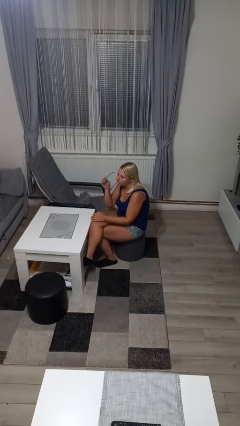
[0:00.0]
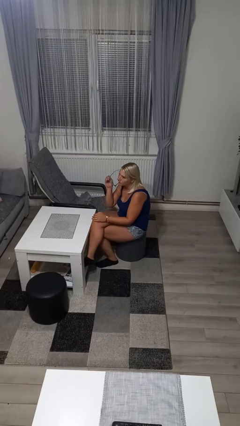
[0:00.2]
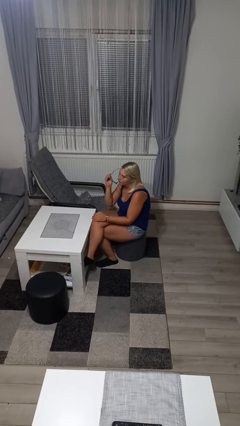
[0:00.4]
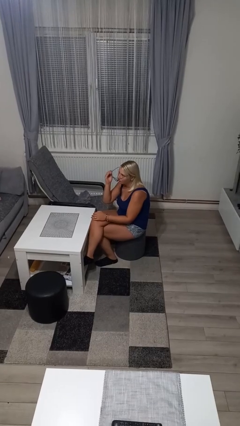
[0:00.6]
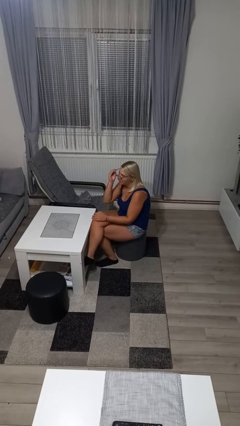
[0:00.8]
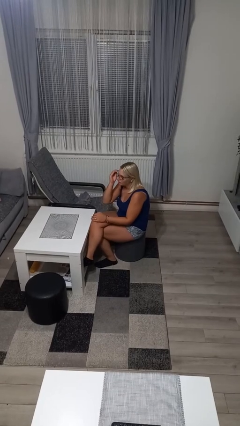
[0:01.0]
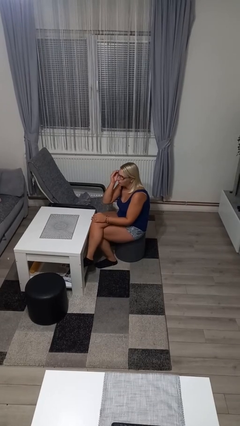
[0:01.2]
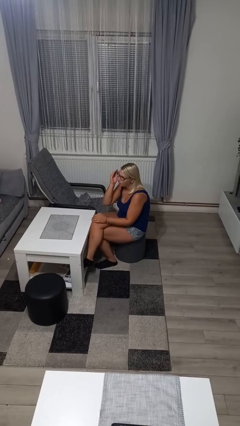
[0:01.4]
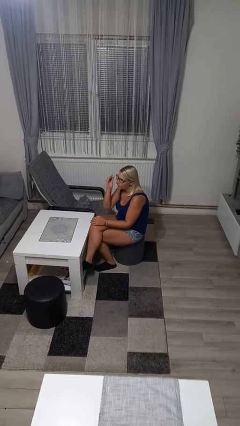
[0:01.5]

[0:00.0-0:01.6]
person puts on glasses

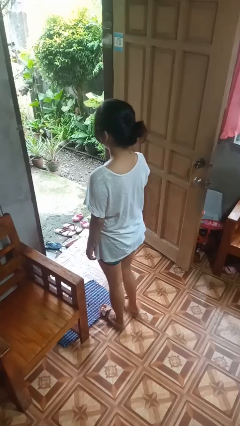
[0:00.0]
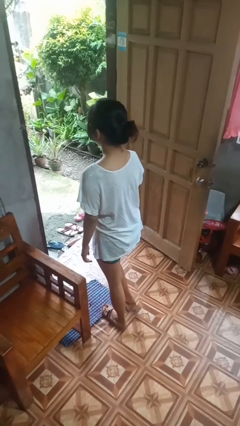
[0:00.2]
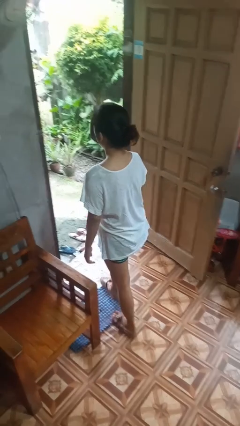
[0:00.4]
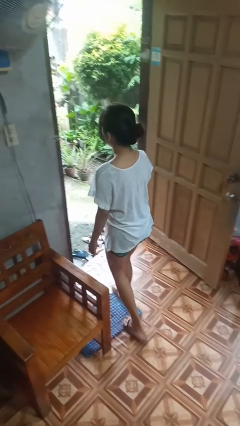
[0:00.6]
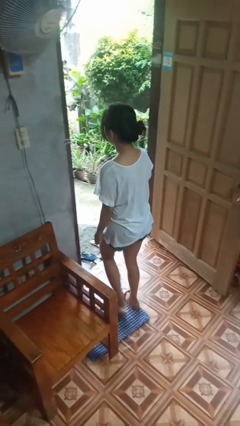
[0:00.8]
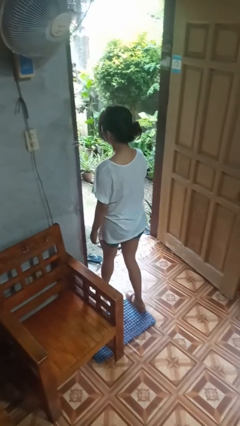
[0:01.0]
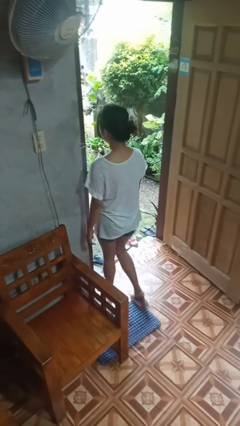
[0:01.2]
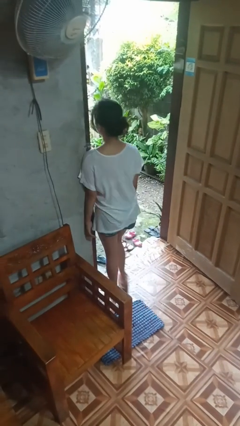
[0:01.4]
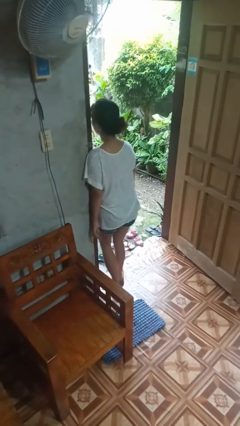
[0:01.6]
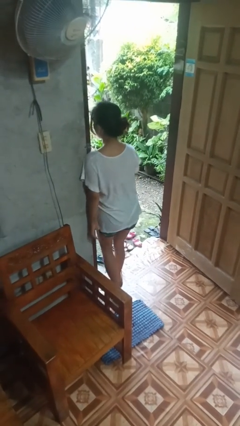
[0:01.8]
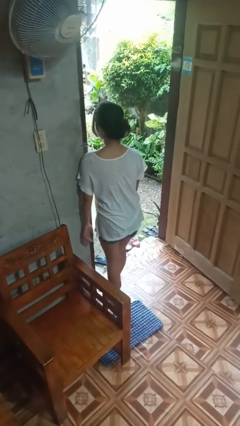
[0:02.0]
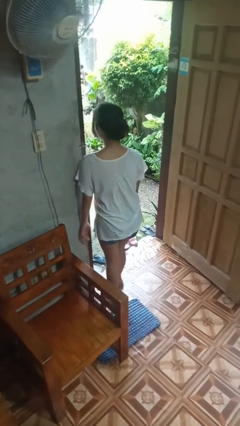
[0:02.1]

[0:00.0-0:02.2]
person bumps into wall

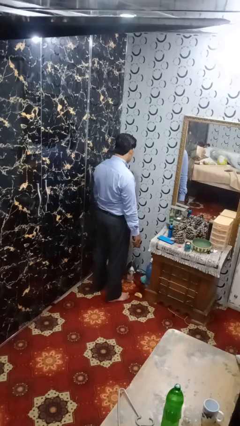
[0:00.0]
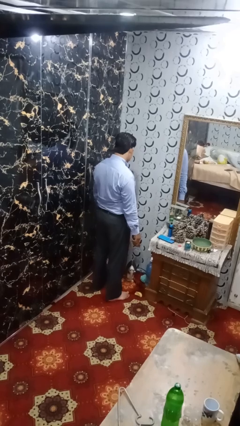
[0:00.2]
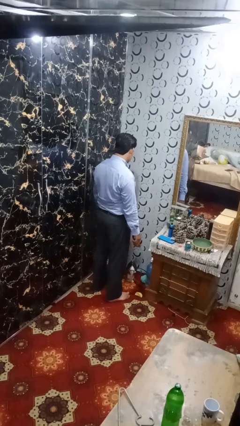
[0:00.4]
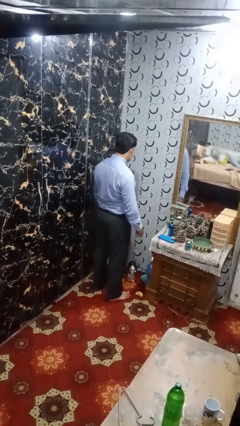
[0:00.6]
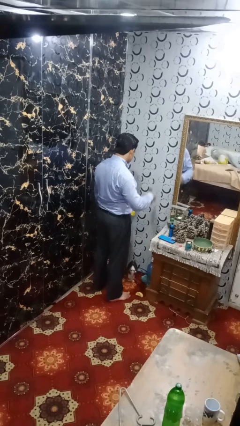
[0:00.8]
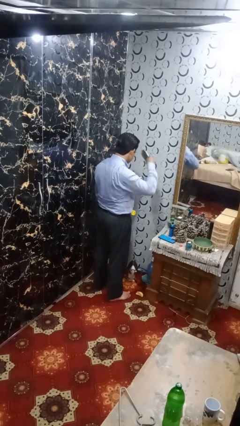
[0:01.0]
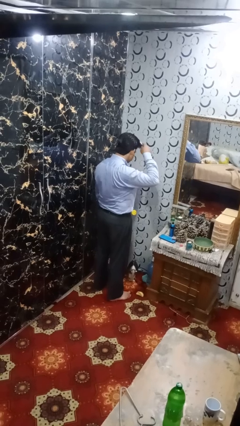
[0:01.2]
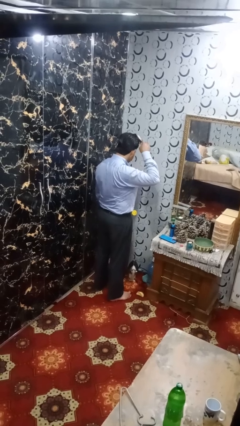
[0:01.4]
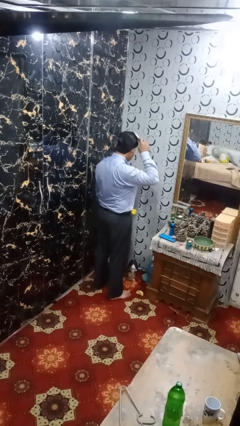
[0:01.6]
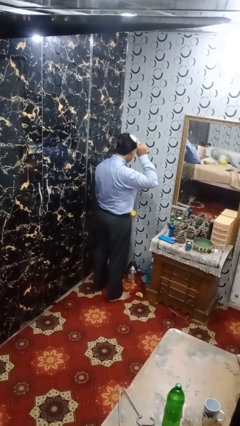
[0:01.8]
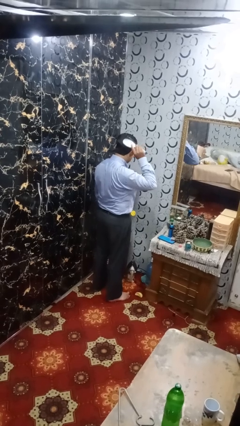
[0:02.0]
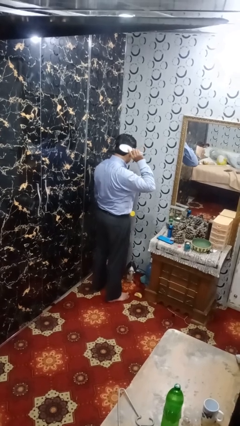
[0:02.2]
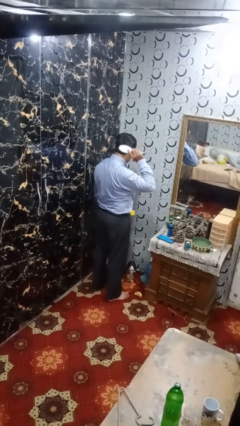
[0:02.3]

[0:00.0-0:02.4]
person brushes hair

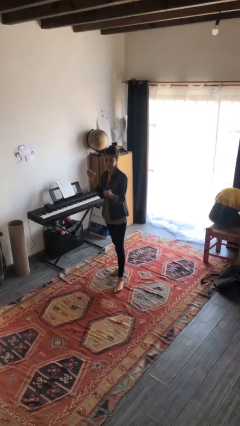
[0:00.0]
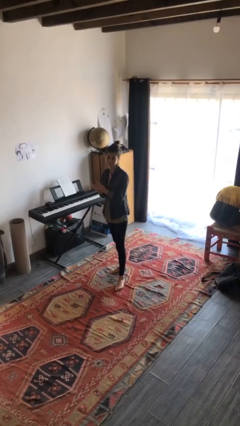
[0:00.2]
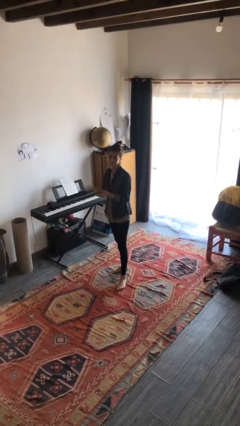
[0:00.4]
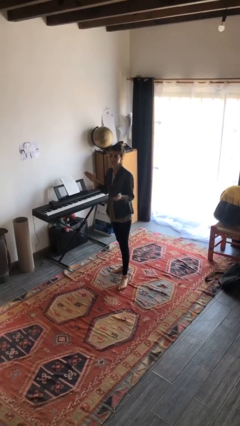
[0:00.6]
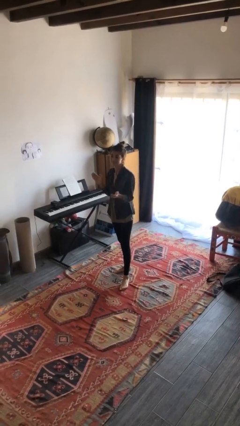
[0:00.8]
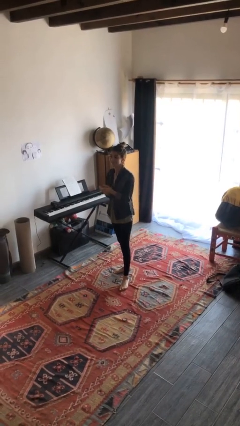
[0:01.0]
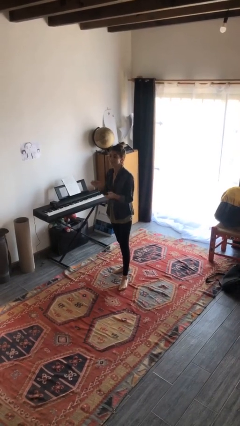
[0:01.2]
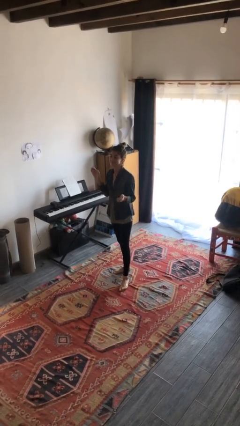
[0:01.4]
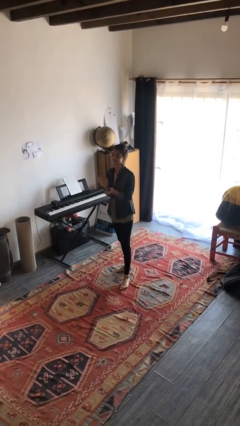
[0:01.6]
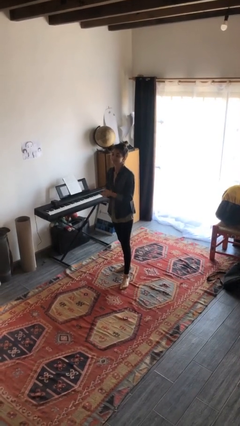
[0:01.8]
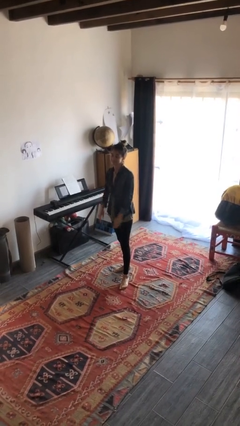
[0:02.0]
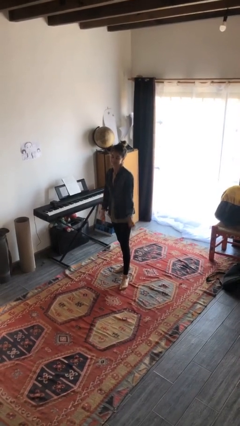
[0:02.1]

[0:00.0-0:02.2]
person claps hands

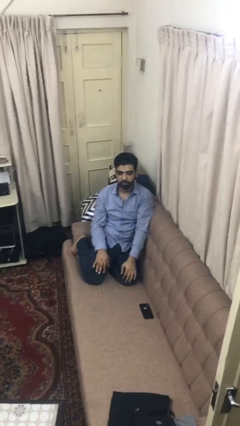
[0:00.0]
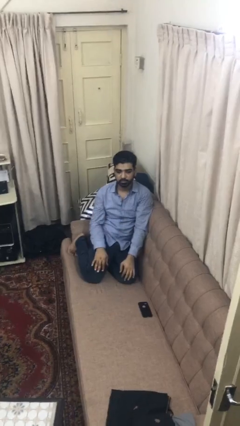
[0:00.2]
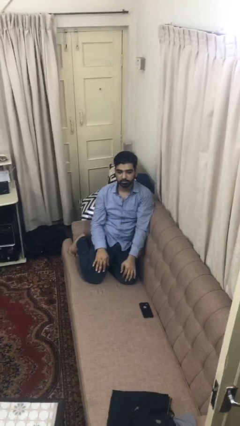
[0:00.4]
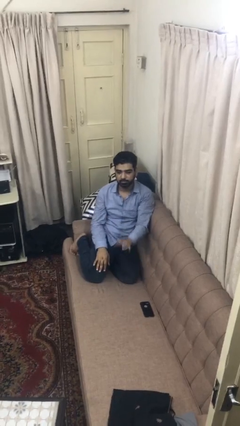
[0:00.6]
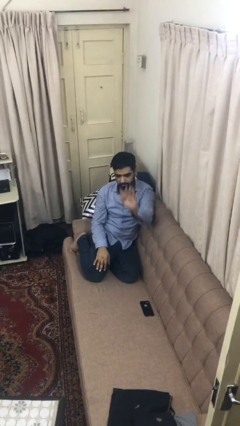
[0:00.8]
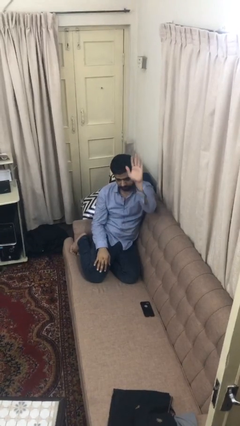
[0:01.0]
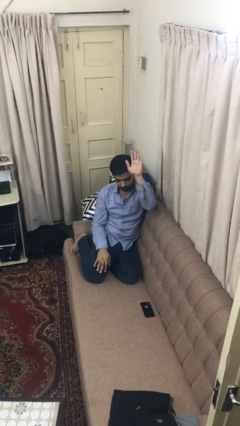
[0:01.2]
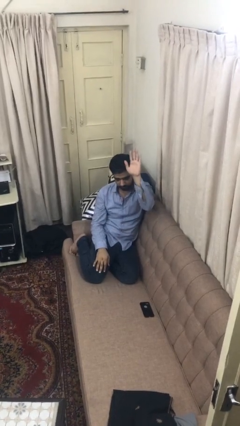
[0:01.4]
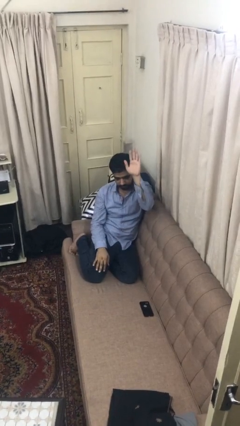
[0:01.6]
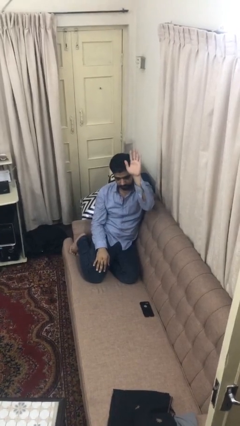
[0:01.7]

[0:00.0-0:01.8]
person gestures raise hand

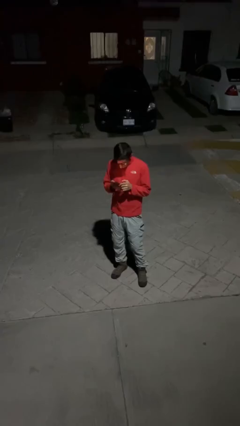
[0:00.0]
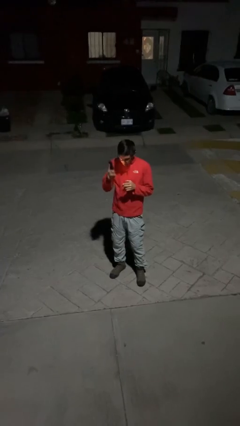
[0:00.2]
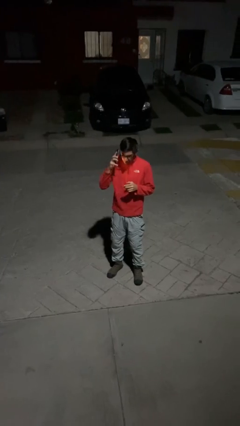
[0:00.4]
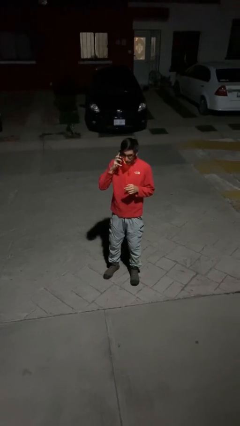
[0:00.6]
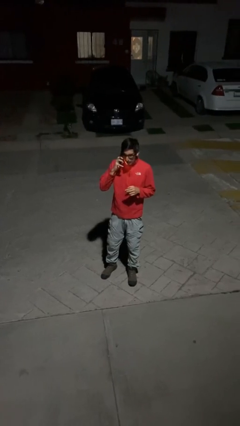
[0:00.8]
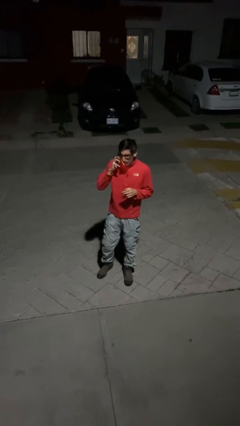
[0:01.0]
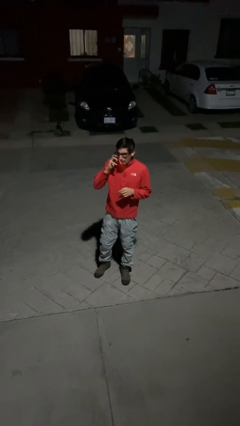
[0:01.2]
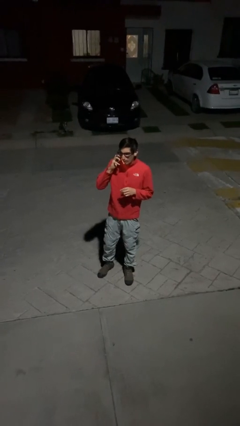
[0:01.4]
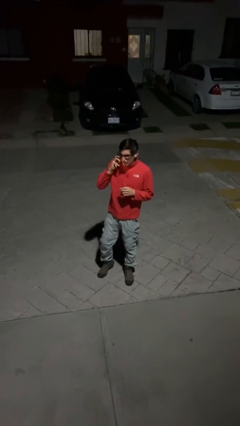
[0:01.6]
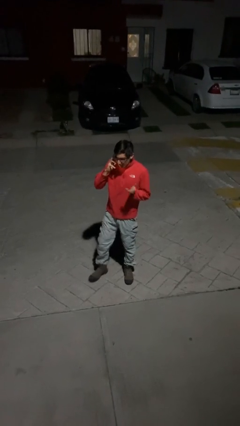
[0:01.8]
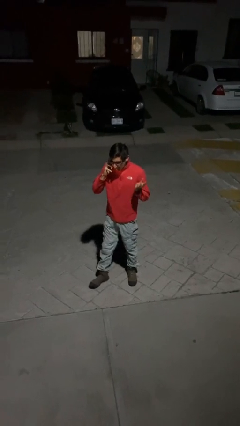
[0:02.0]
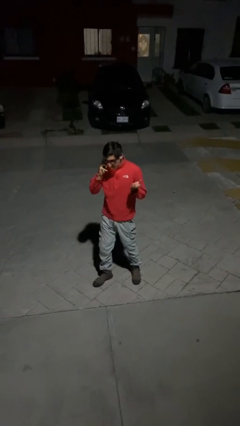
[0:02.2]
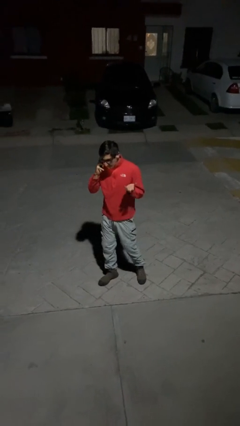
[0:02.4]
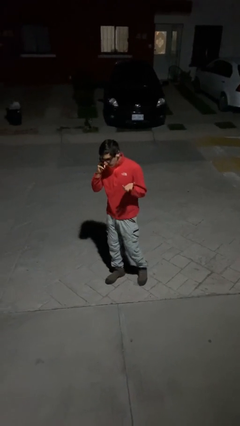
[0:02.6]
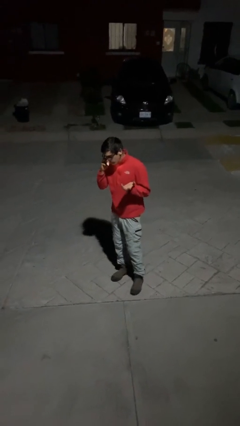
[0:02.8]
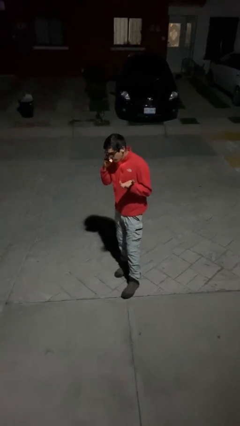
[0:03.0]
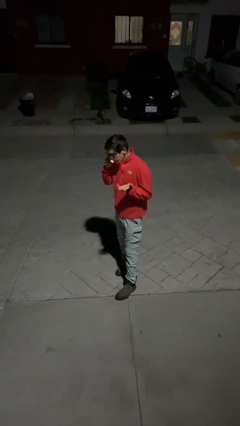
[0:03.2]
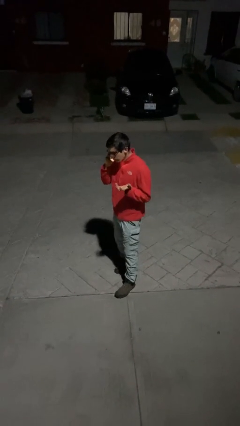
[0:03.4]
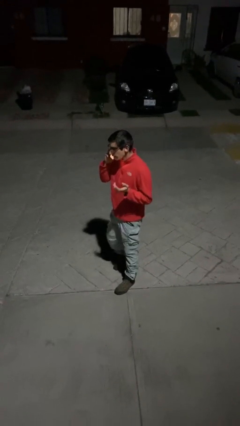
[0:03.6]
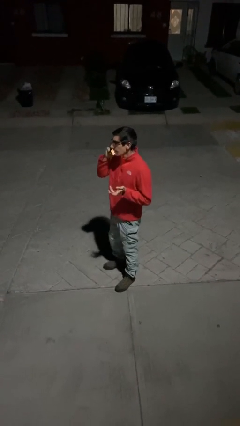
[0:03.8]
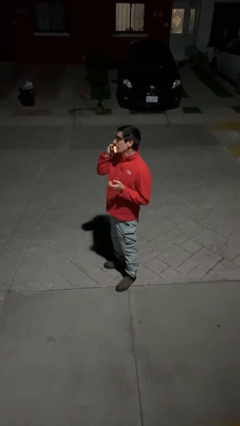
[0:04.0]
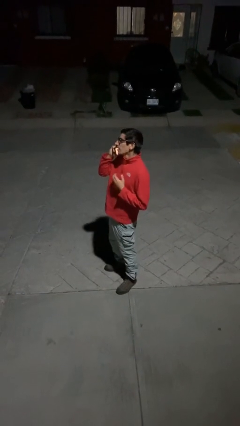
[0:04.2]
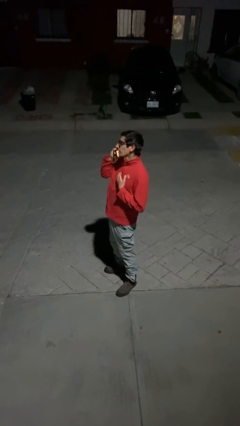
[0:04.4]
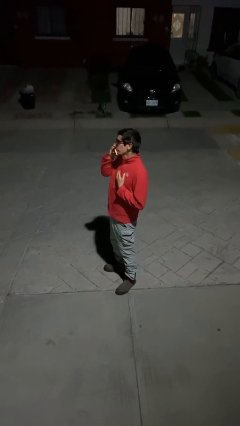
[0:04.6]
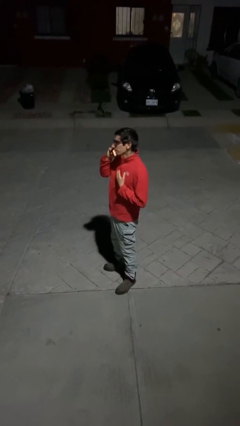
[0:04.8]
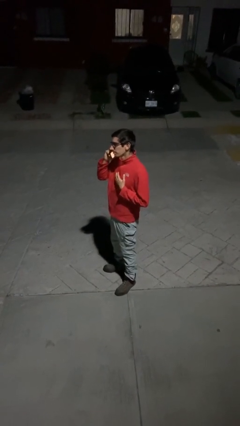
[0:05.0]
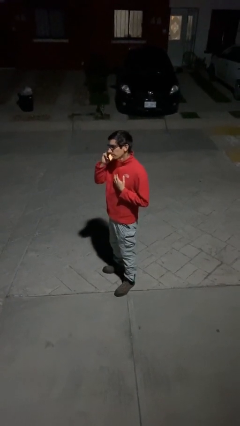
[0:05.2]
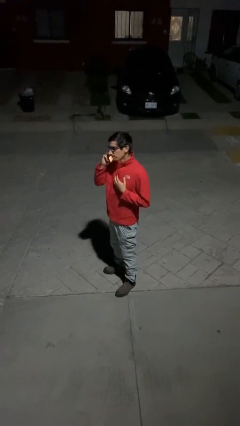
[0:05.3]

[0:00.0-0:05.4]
person talks on phone

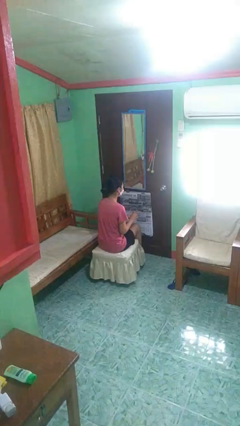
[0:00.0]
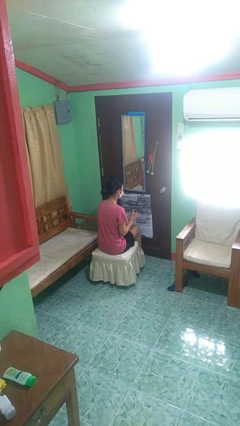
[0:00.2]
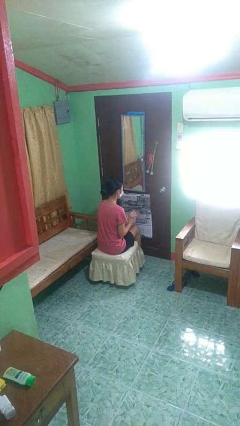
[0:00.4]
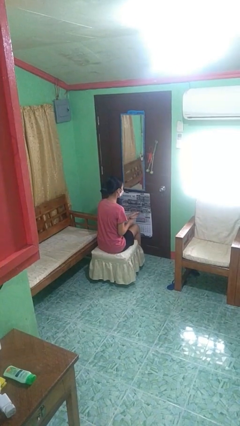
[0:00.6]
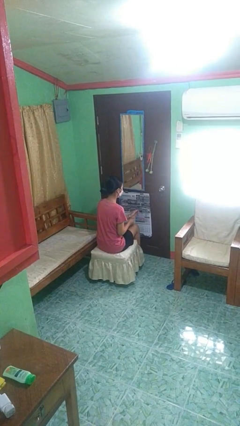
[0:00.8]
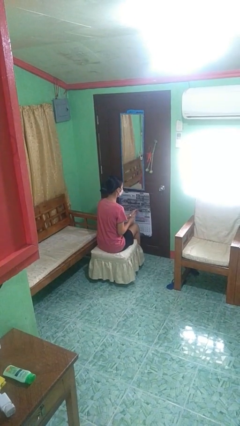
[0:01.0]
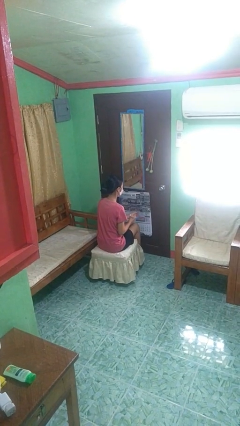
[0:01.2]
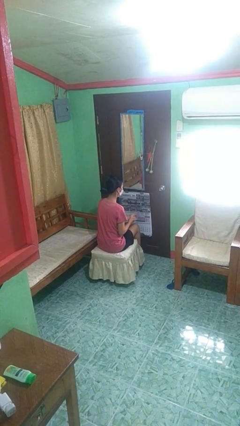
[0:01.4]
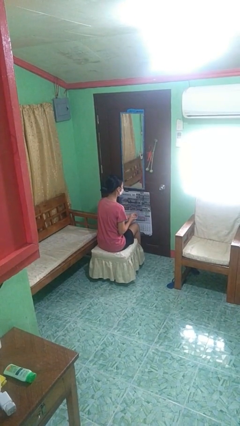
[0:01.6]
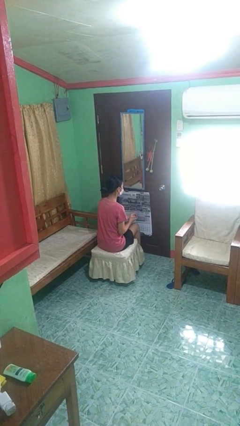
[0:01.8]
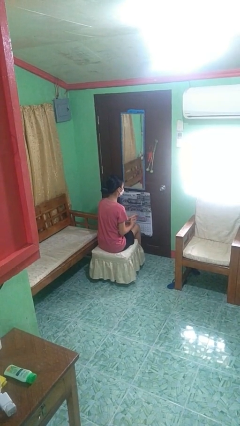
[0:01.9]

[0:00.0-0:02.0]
person puts on wristwatch
